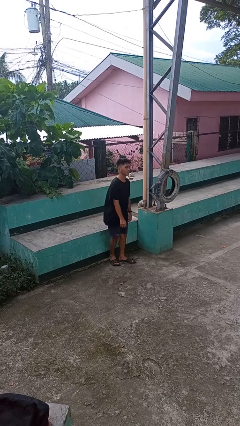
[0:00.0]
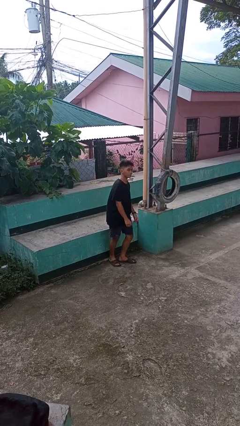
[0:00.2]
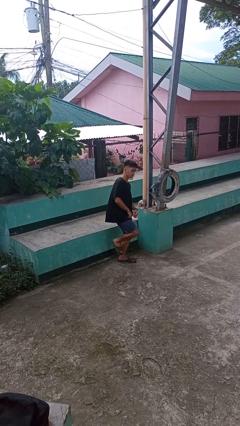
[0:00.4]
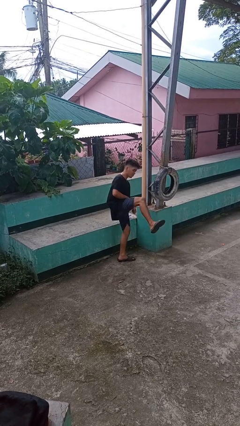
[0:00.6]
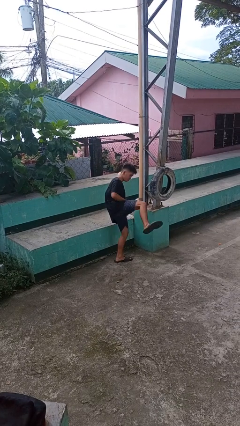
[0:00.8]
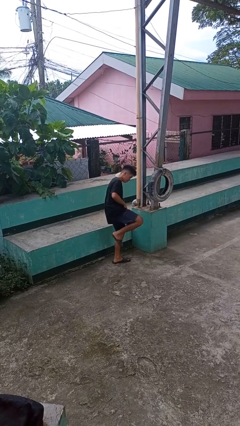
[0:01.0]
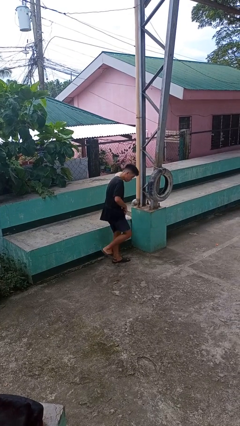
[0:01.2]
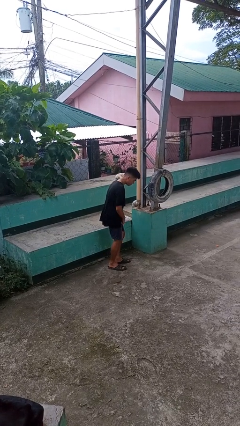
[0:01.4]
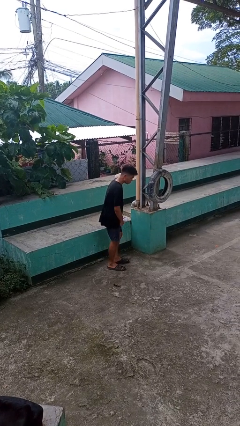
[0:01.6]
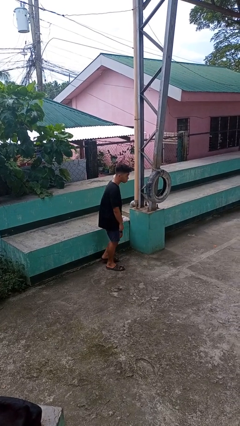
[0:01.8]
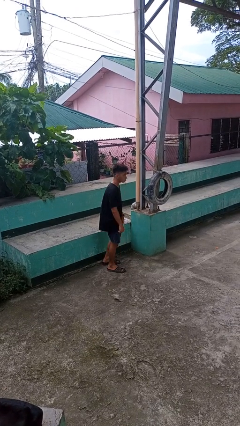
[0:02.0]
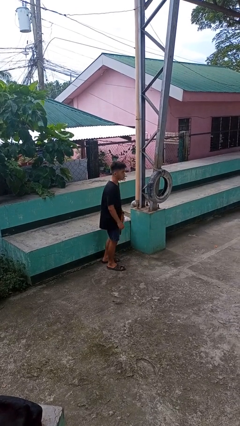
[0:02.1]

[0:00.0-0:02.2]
person karate kicks

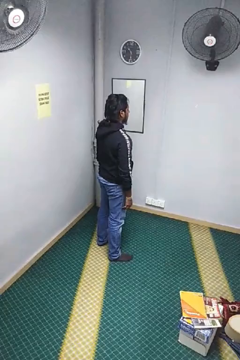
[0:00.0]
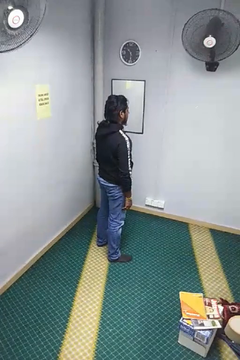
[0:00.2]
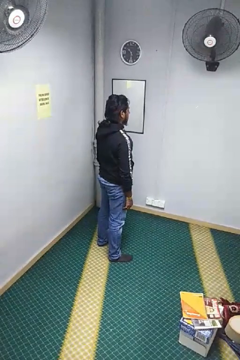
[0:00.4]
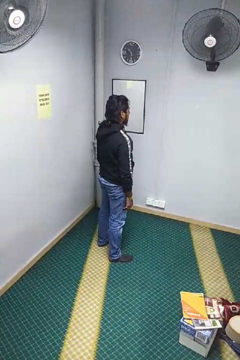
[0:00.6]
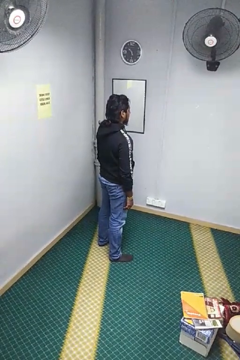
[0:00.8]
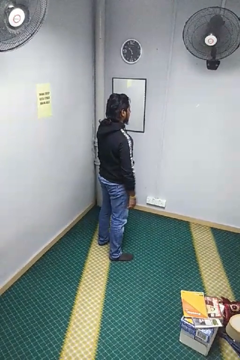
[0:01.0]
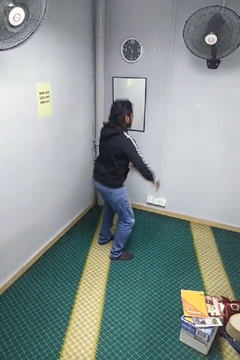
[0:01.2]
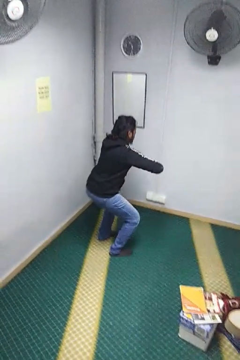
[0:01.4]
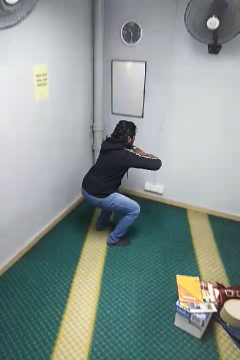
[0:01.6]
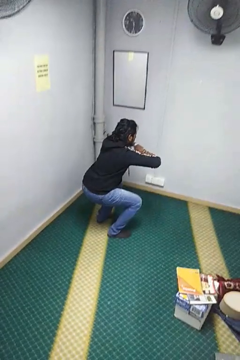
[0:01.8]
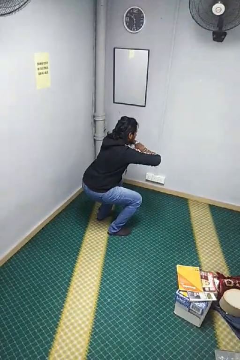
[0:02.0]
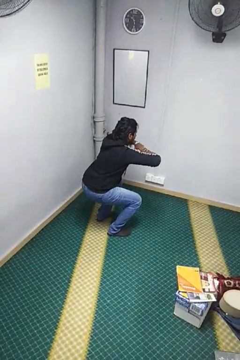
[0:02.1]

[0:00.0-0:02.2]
person squats

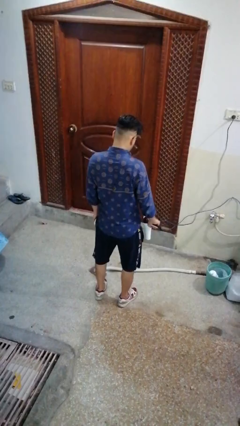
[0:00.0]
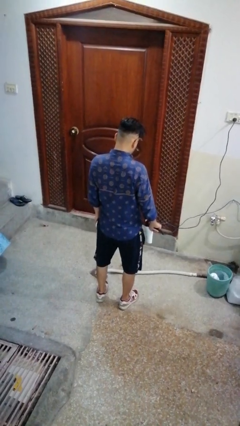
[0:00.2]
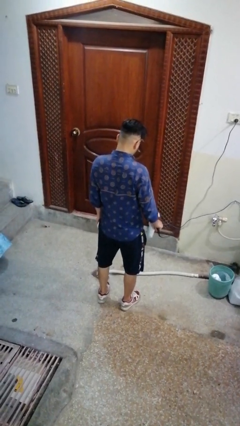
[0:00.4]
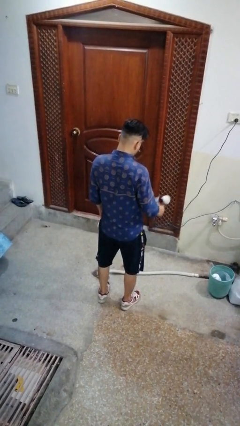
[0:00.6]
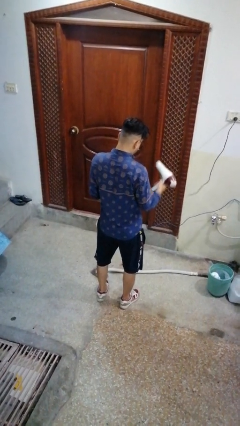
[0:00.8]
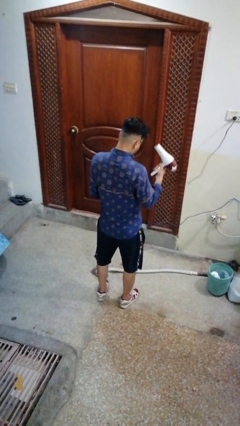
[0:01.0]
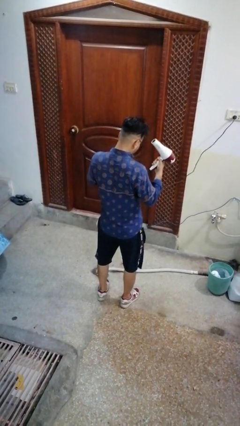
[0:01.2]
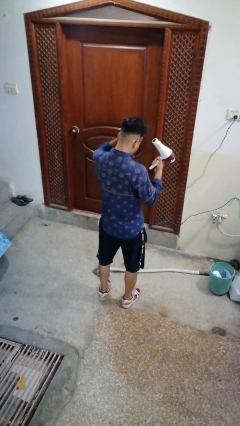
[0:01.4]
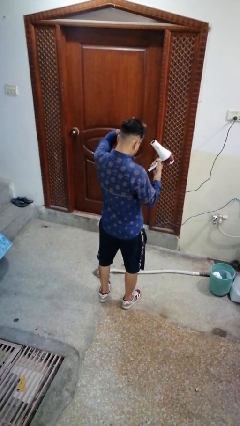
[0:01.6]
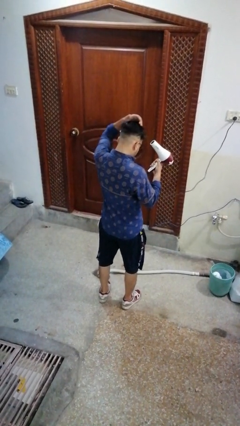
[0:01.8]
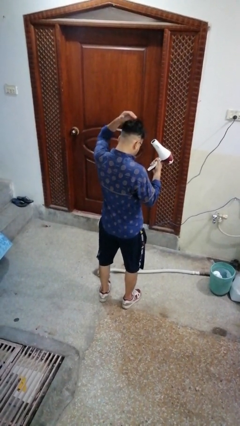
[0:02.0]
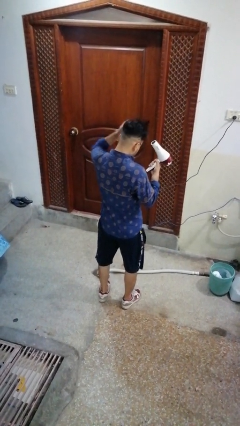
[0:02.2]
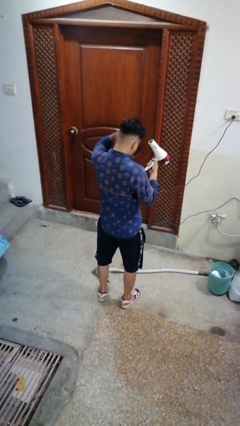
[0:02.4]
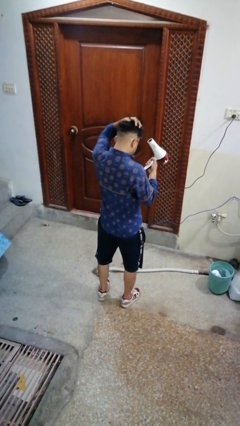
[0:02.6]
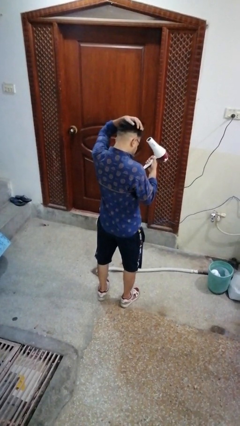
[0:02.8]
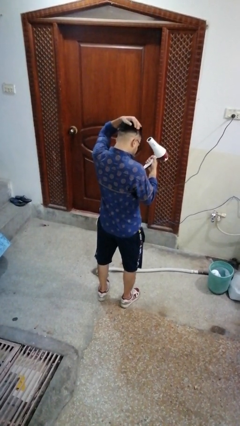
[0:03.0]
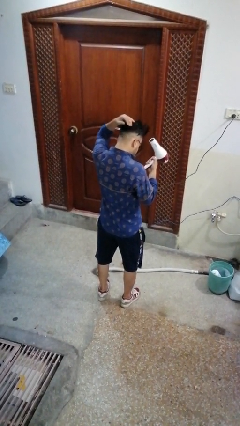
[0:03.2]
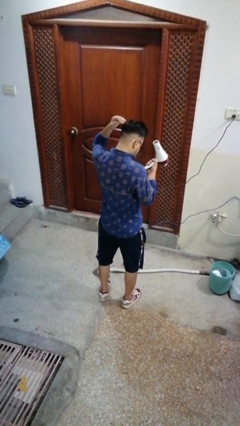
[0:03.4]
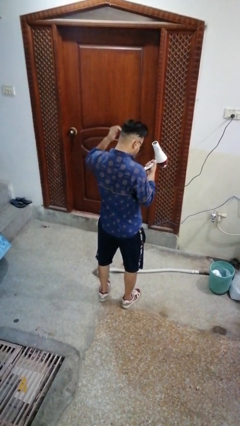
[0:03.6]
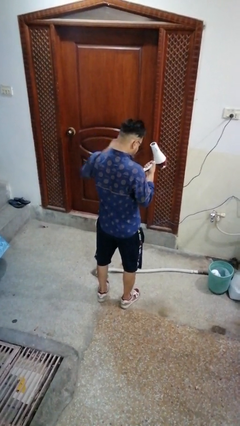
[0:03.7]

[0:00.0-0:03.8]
person dries hair with hairdryer

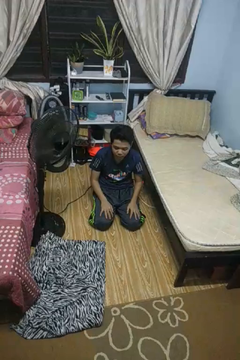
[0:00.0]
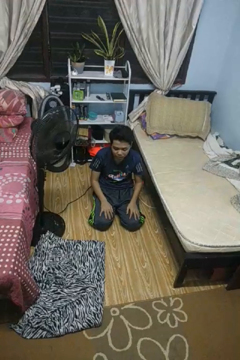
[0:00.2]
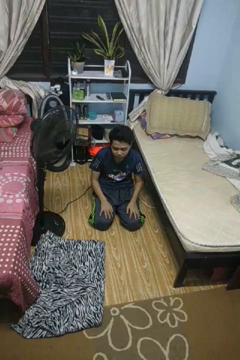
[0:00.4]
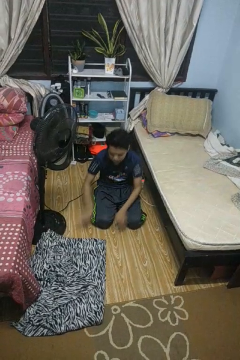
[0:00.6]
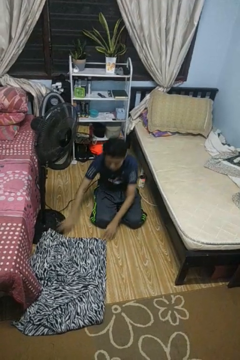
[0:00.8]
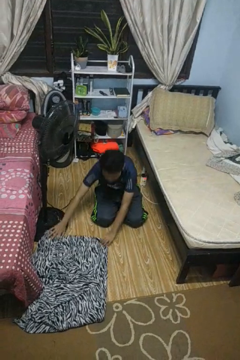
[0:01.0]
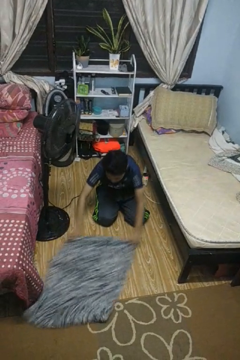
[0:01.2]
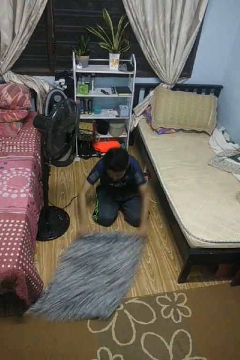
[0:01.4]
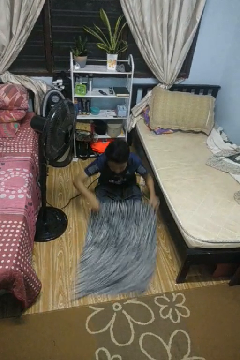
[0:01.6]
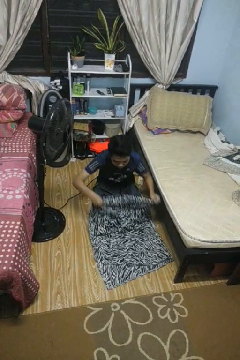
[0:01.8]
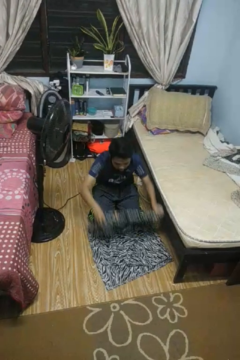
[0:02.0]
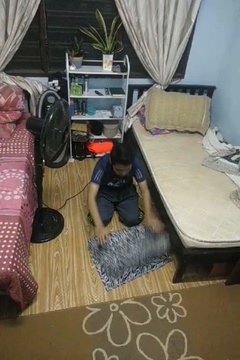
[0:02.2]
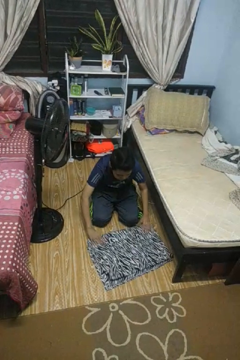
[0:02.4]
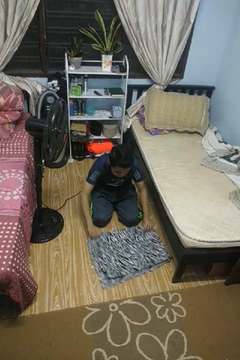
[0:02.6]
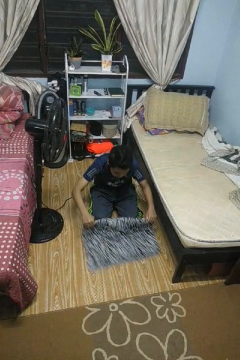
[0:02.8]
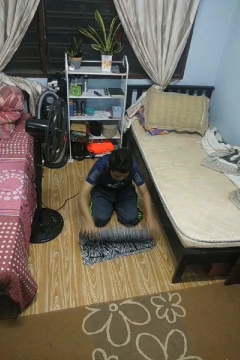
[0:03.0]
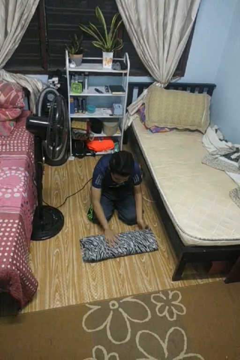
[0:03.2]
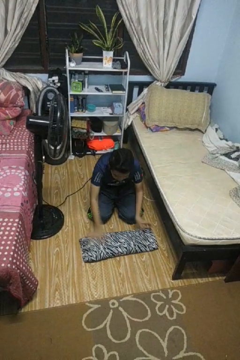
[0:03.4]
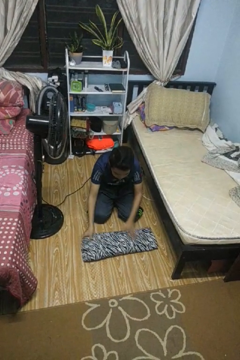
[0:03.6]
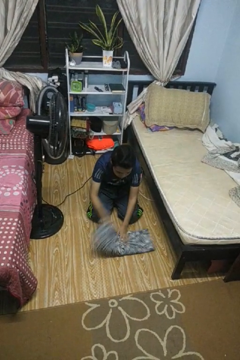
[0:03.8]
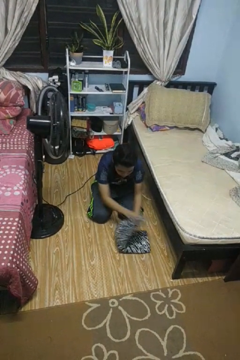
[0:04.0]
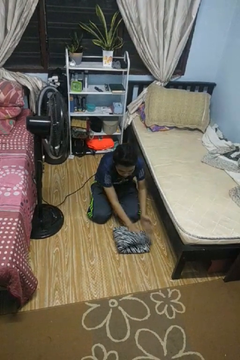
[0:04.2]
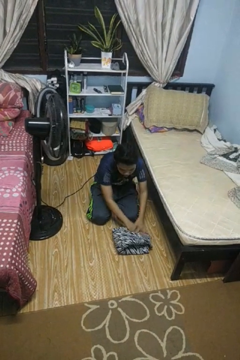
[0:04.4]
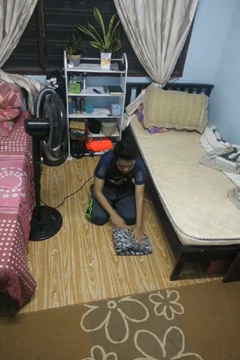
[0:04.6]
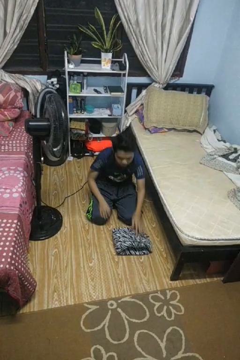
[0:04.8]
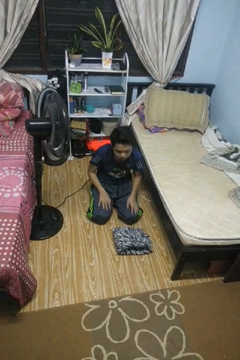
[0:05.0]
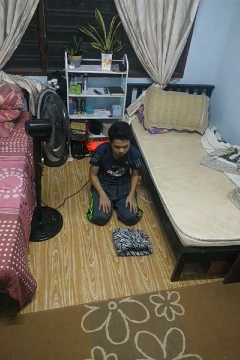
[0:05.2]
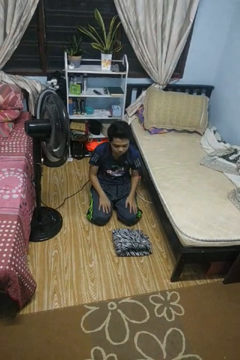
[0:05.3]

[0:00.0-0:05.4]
person folds blanket

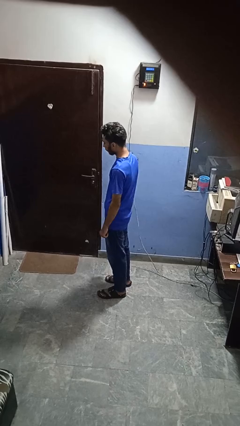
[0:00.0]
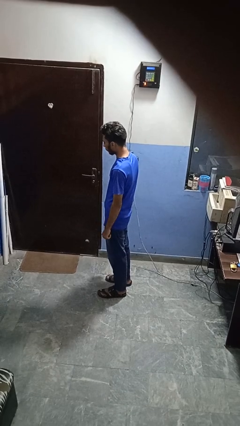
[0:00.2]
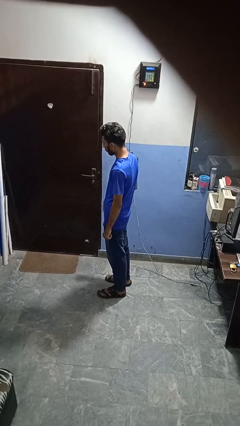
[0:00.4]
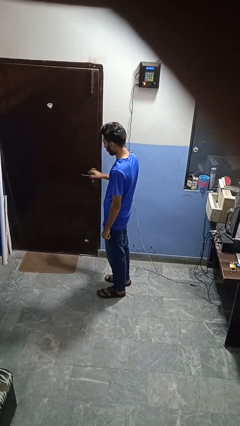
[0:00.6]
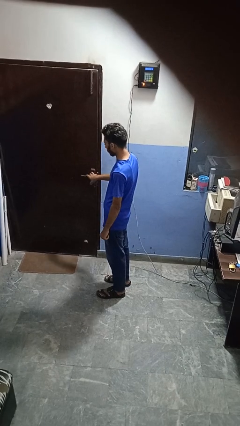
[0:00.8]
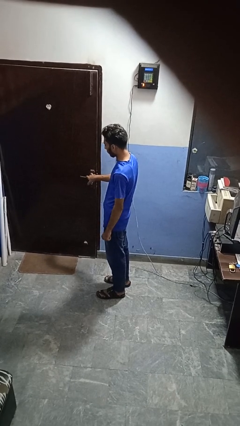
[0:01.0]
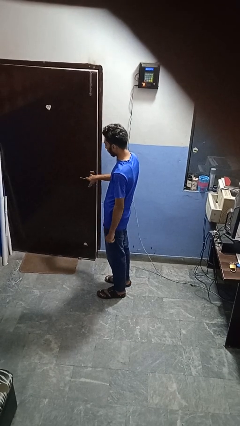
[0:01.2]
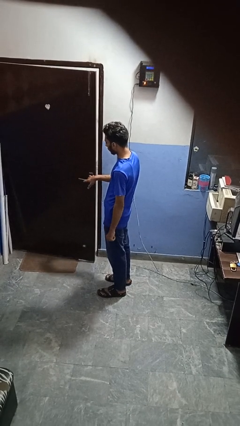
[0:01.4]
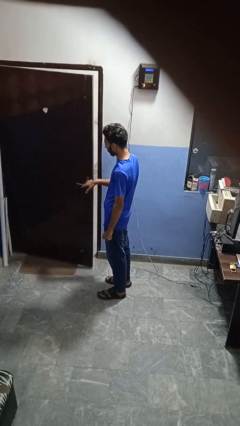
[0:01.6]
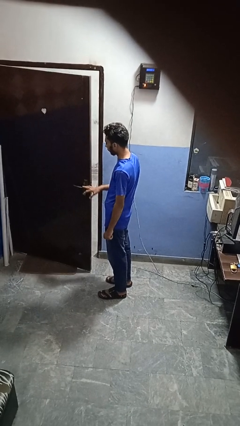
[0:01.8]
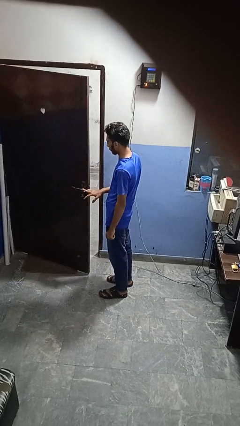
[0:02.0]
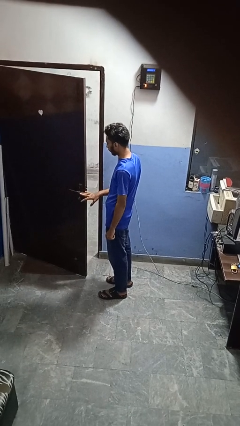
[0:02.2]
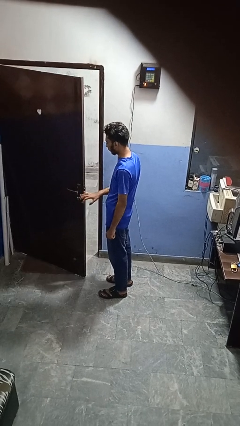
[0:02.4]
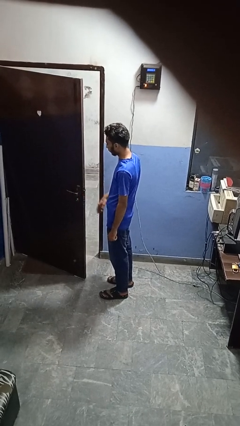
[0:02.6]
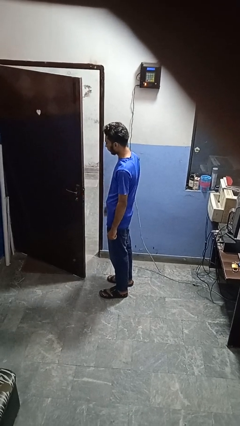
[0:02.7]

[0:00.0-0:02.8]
person opens facility door

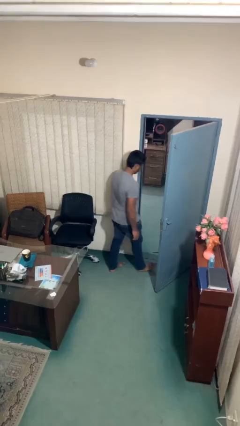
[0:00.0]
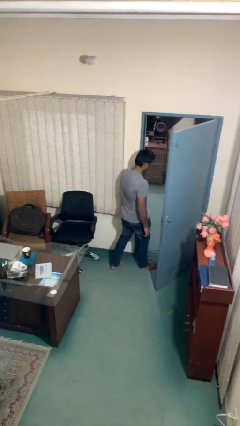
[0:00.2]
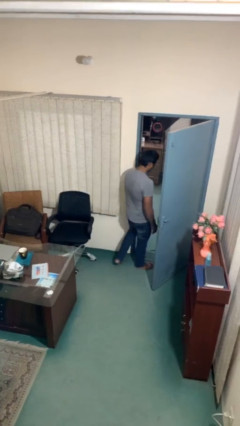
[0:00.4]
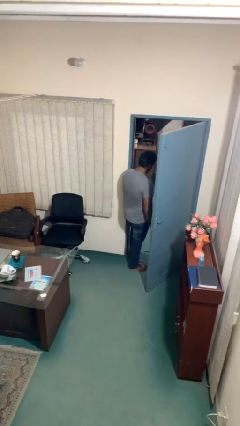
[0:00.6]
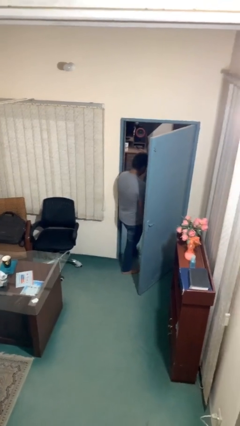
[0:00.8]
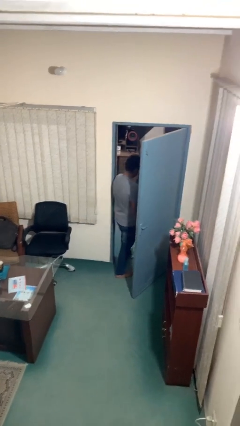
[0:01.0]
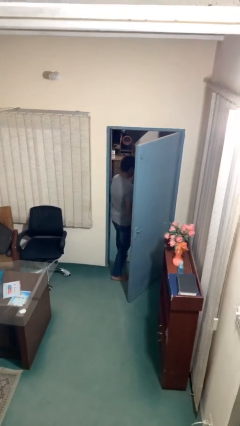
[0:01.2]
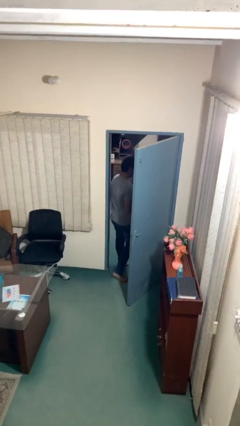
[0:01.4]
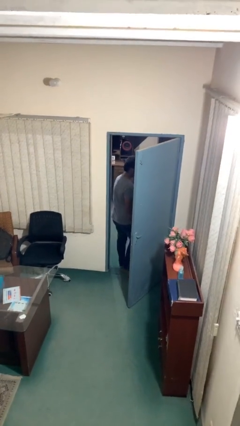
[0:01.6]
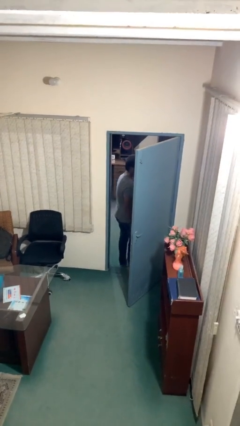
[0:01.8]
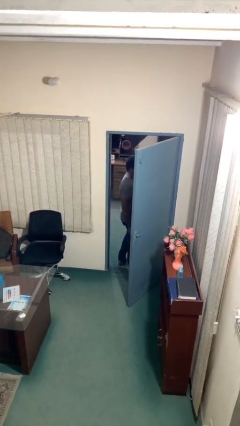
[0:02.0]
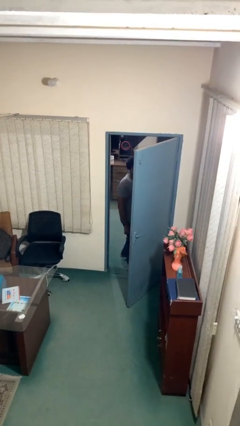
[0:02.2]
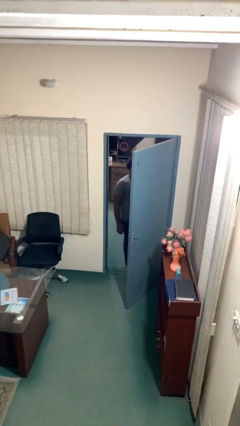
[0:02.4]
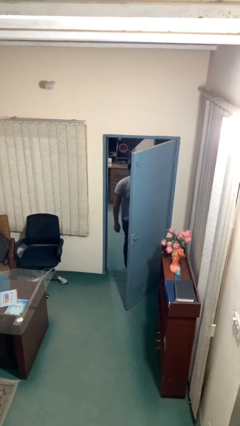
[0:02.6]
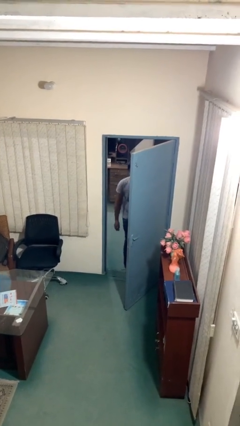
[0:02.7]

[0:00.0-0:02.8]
person exits scene through structure
